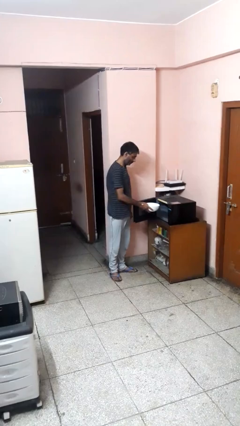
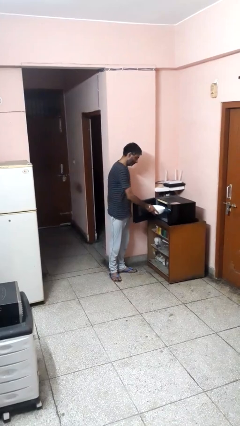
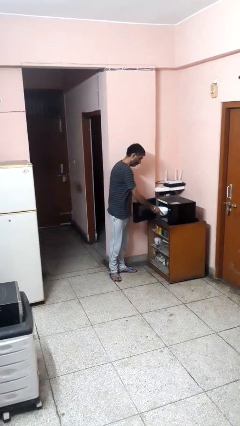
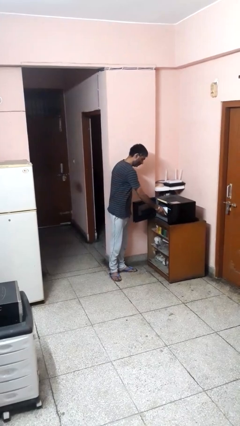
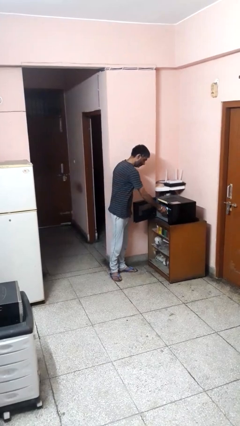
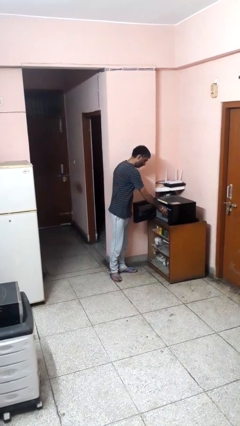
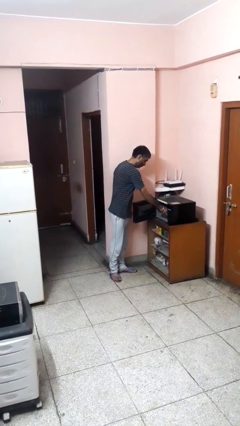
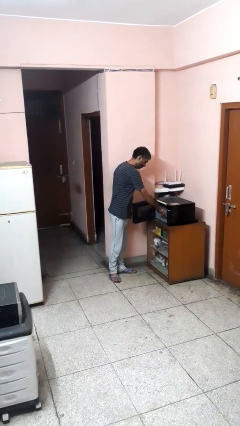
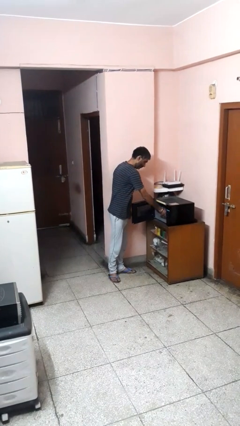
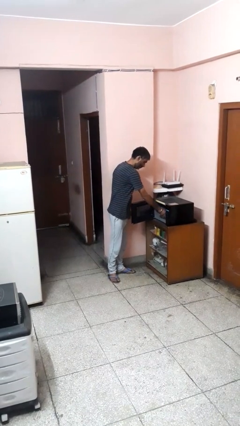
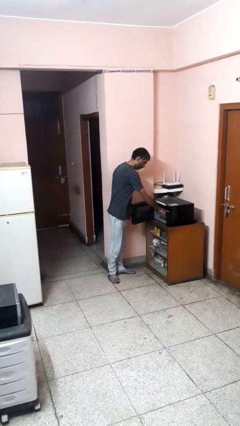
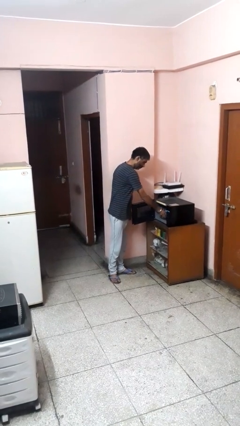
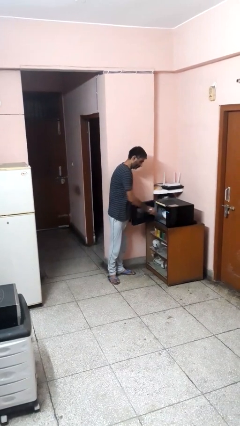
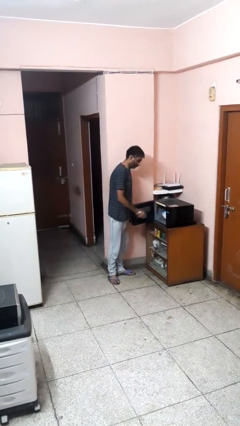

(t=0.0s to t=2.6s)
person puts object into microwave

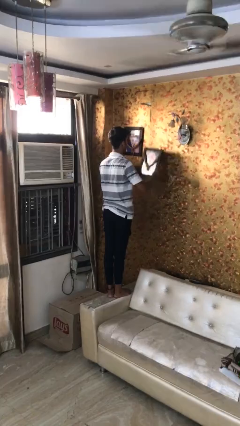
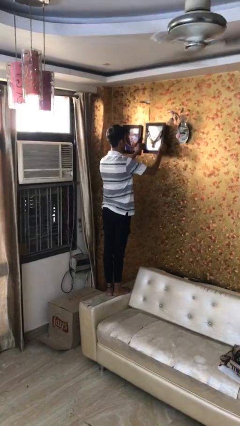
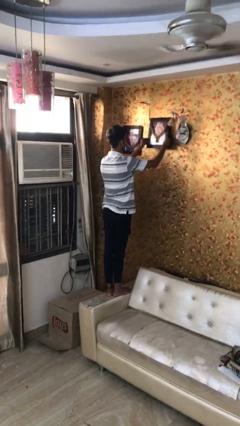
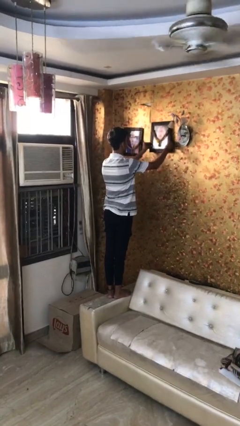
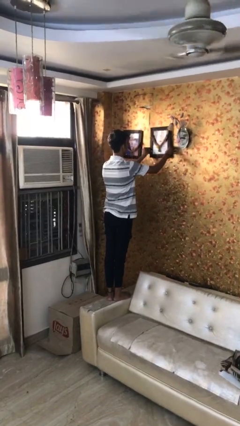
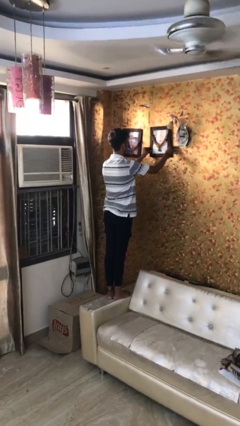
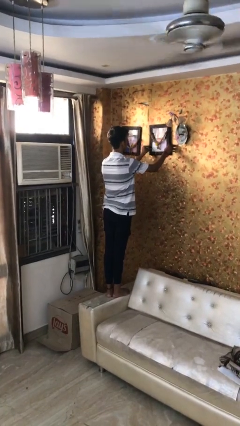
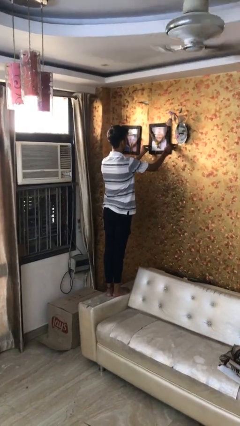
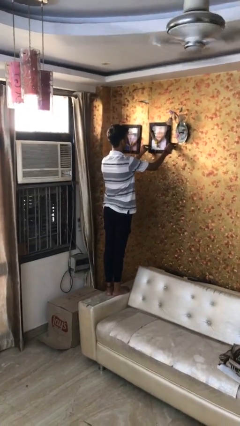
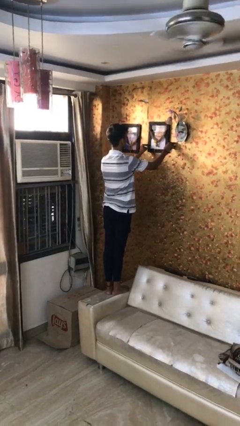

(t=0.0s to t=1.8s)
person puts up picture frame

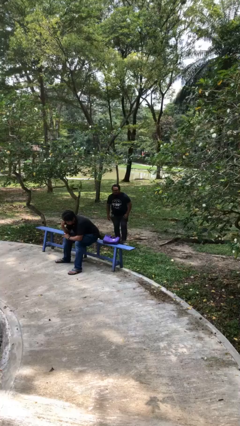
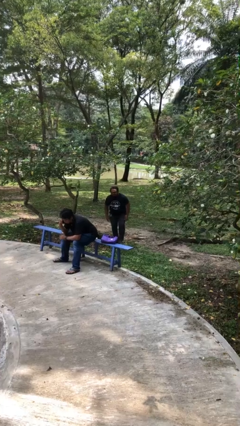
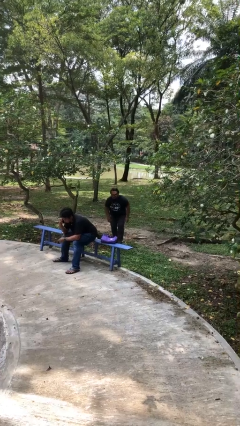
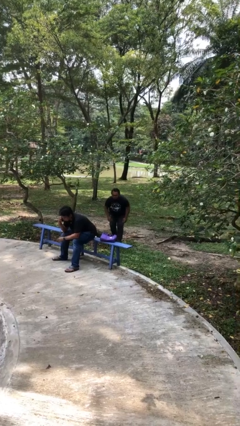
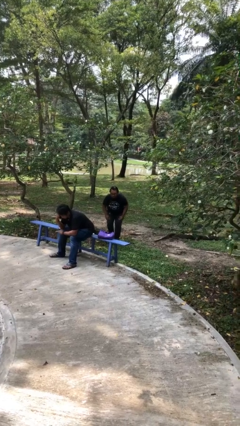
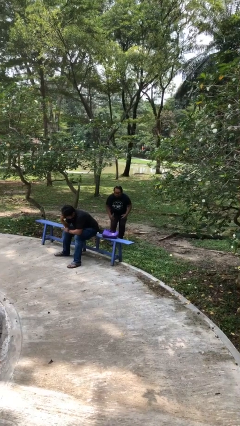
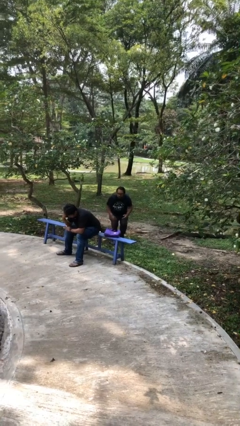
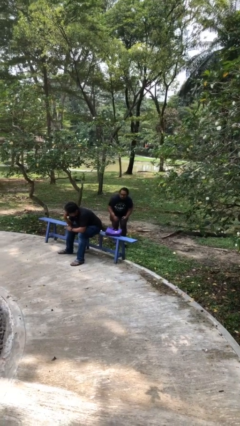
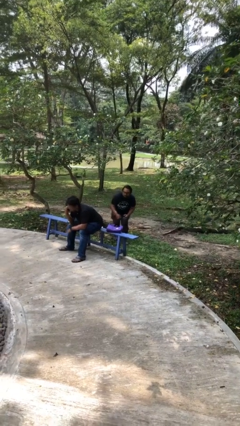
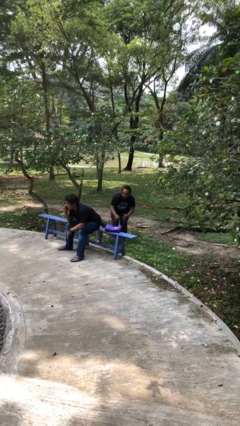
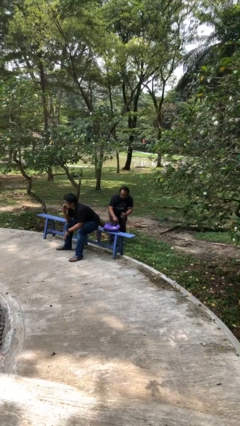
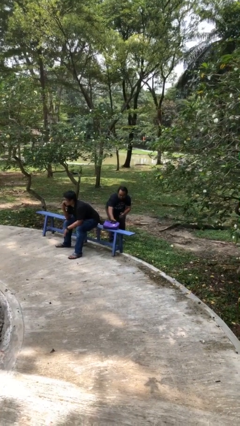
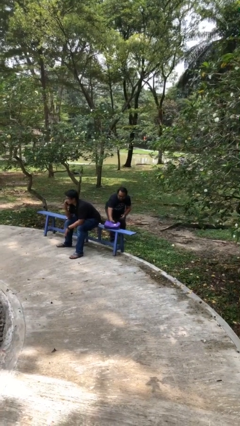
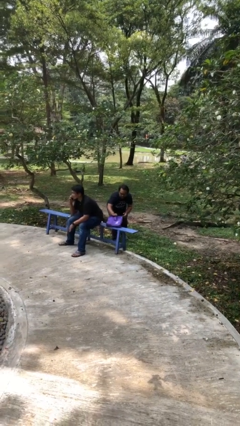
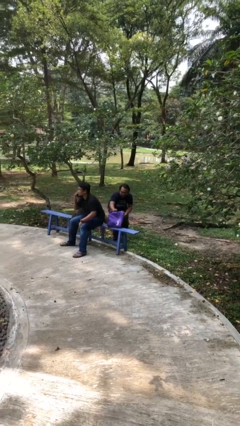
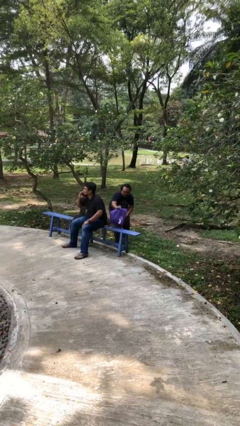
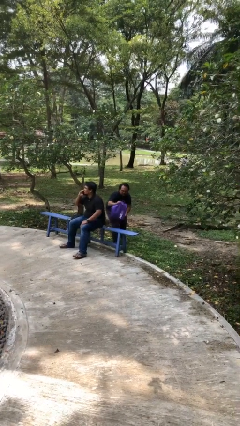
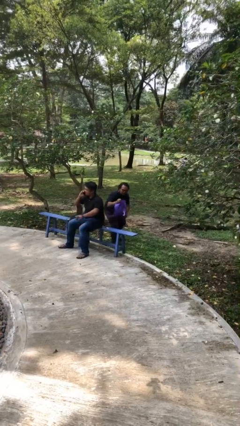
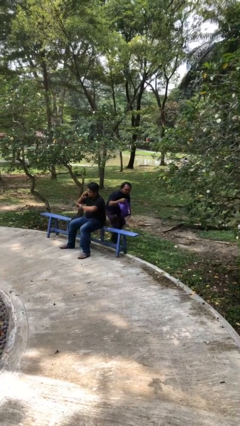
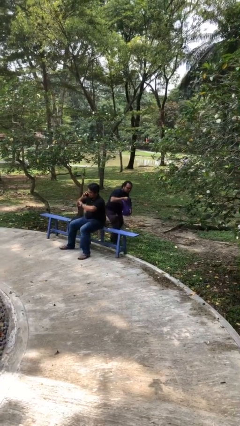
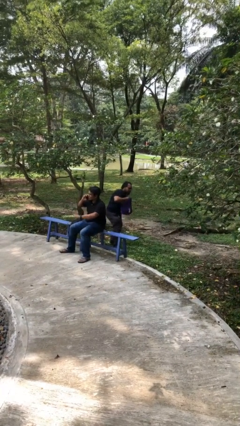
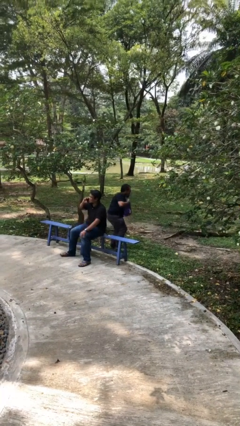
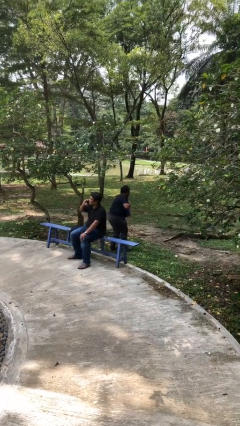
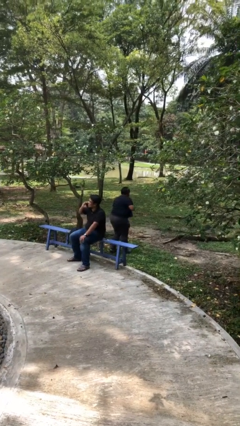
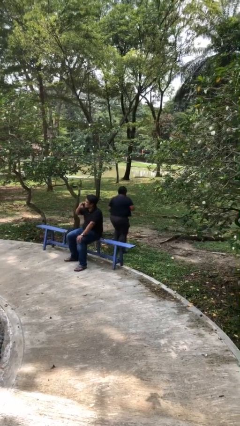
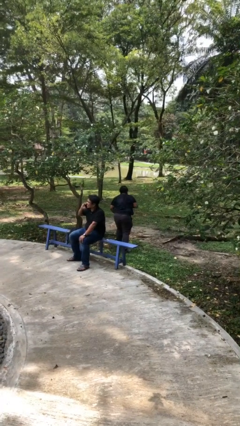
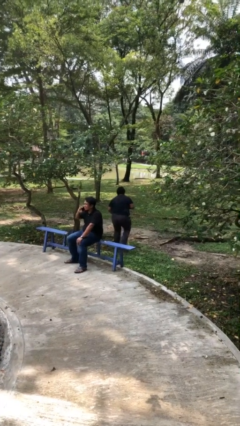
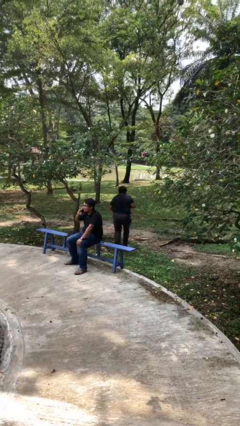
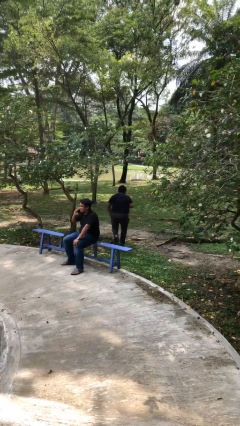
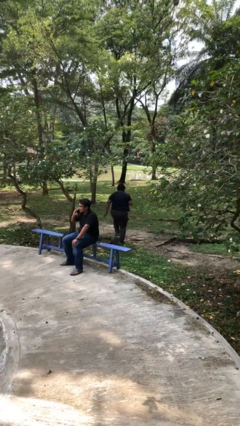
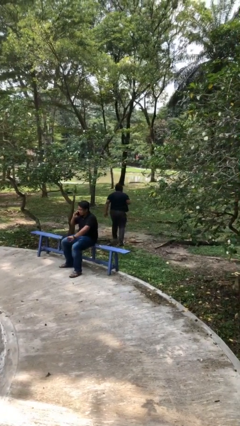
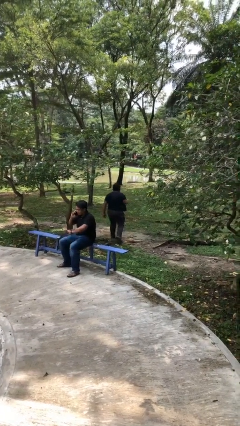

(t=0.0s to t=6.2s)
person steals object from person

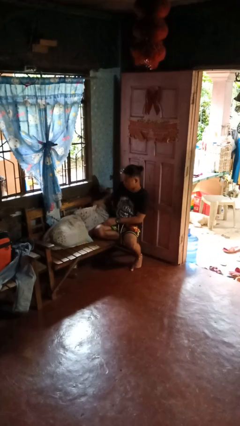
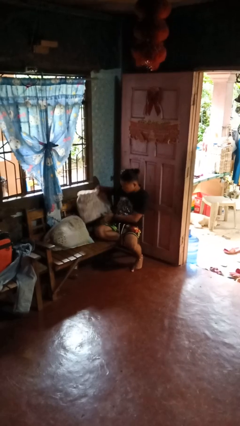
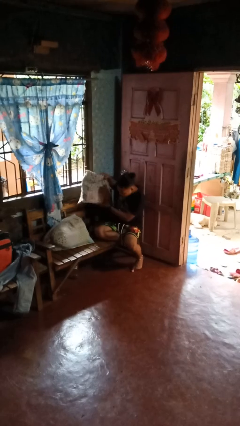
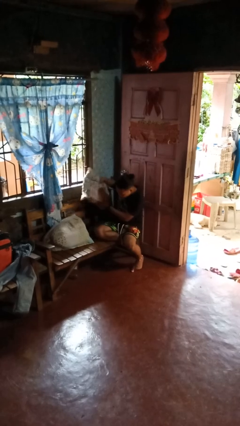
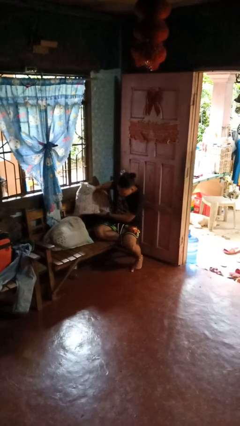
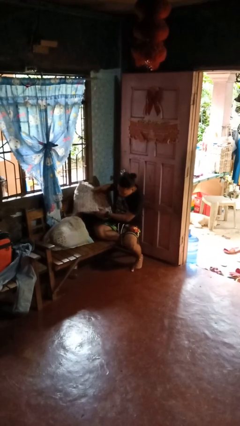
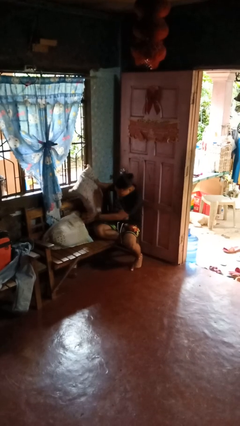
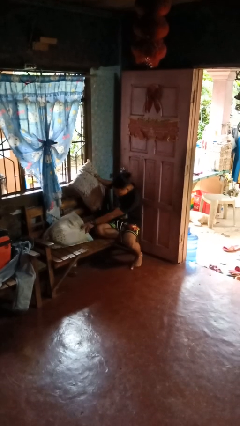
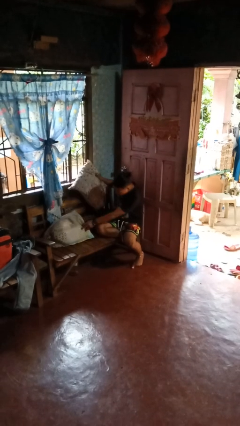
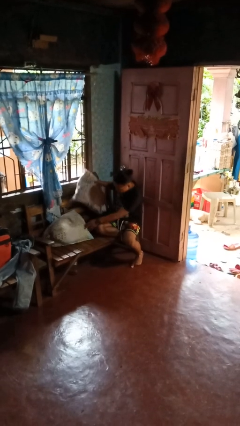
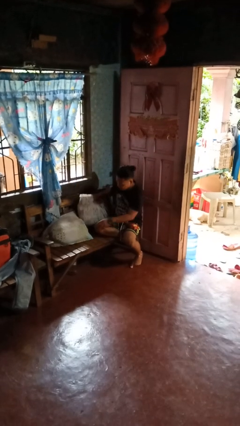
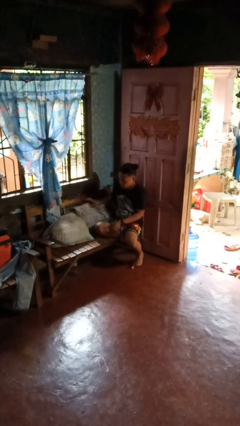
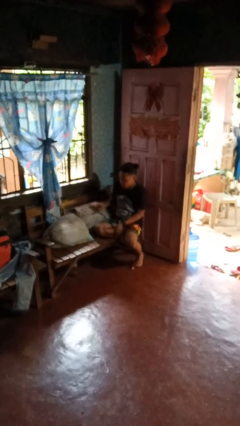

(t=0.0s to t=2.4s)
person searches in couch

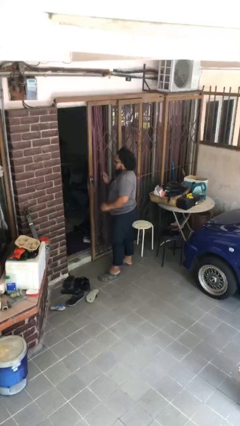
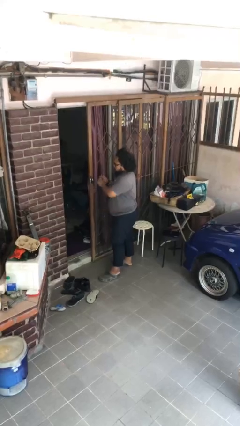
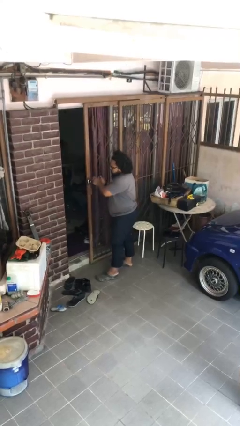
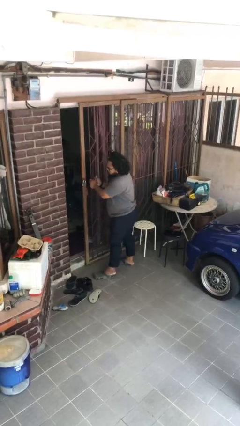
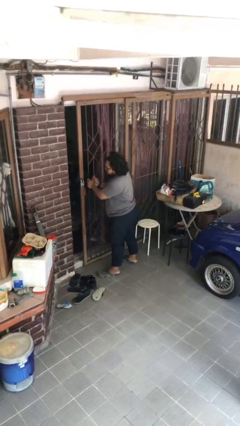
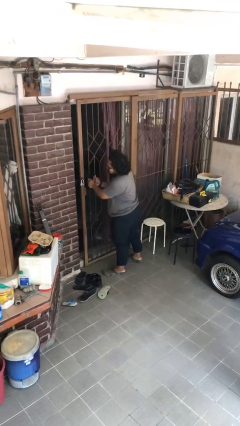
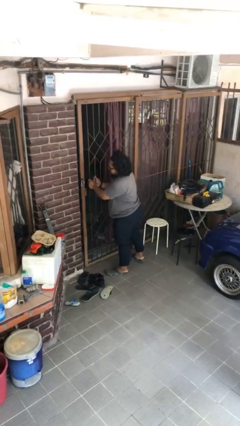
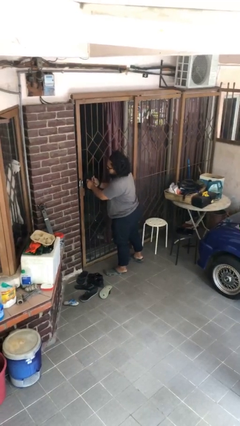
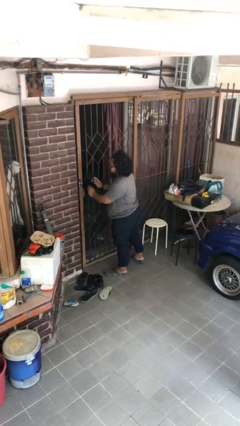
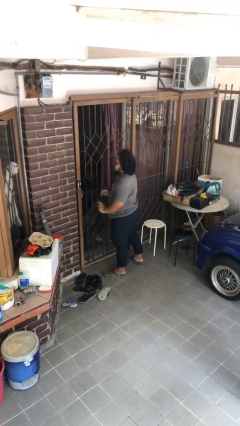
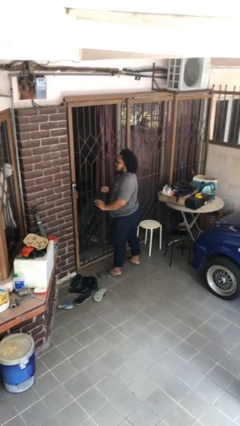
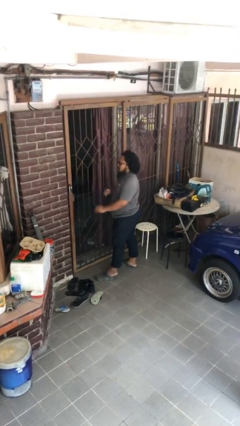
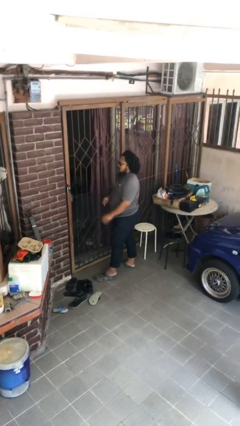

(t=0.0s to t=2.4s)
person closes facility door

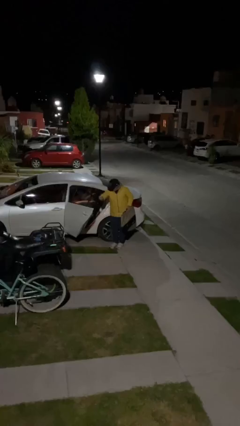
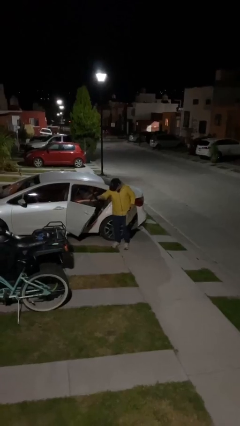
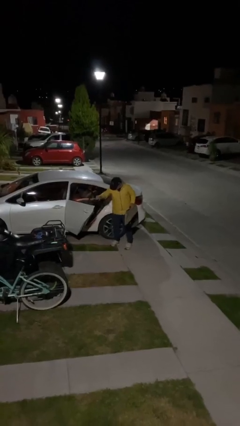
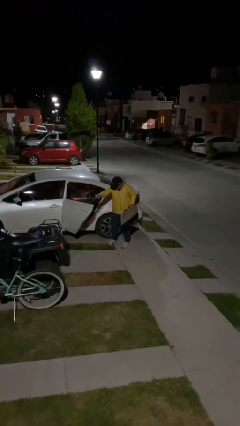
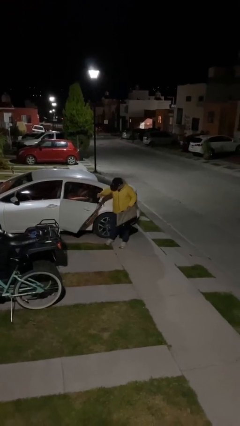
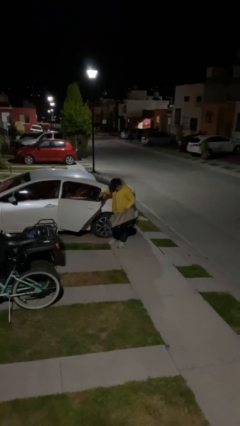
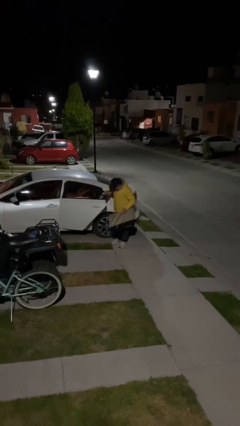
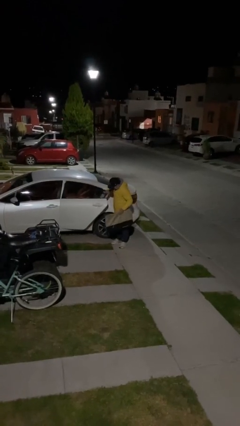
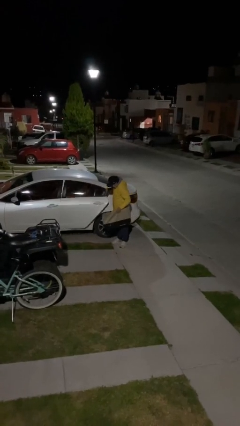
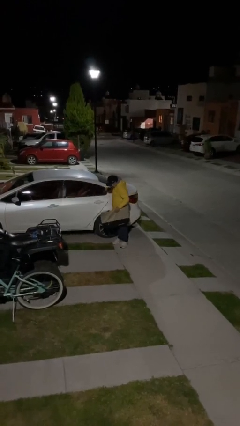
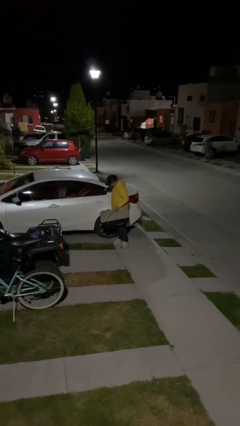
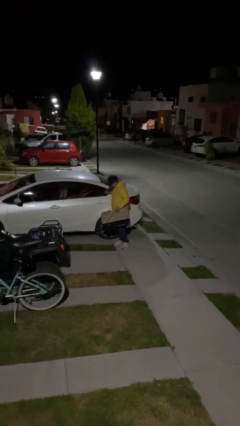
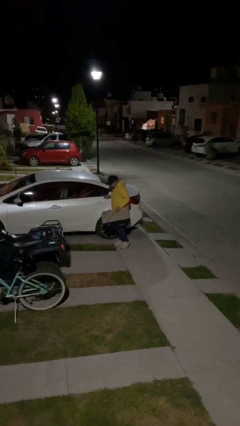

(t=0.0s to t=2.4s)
person closes car door
